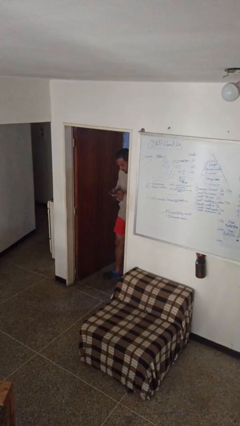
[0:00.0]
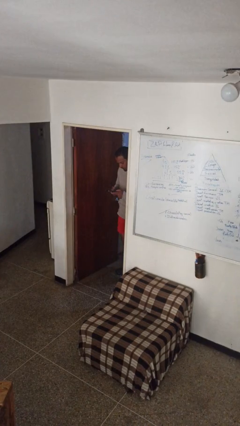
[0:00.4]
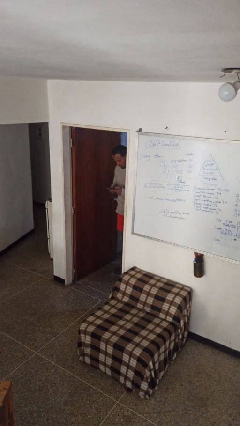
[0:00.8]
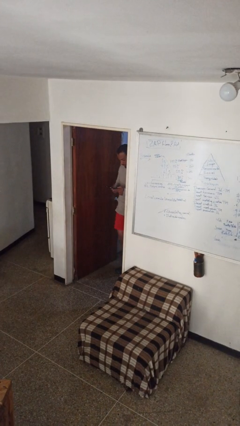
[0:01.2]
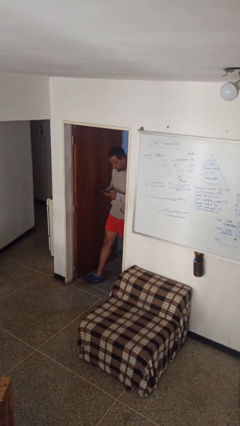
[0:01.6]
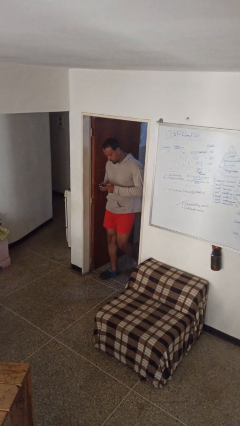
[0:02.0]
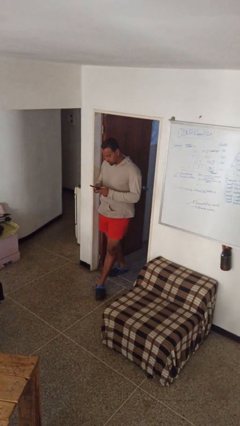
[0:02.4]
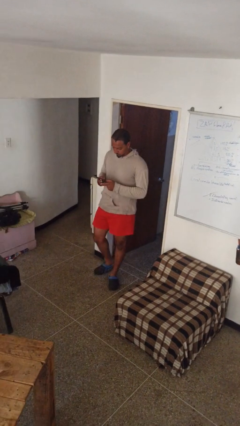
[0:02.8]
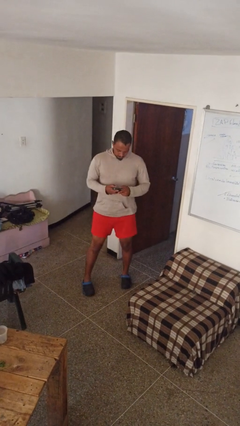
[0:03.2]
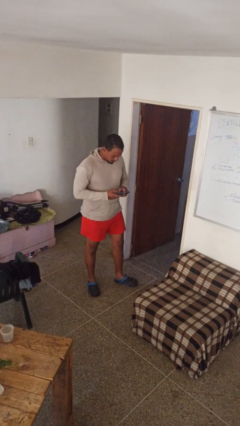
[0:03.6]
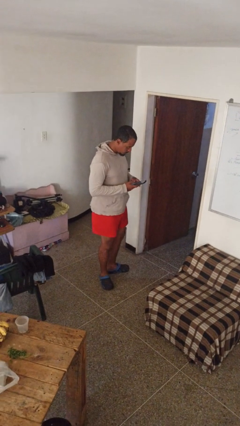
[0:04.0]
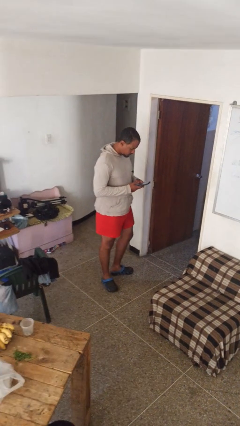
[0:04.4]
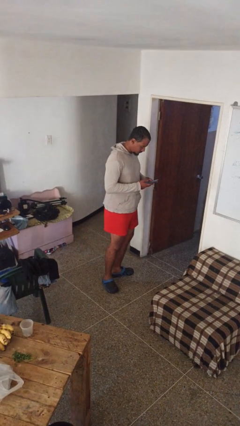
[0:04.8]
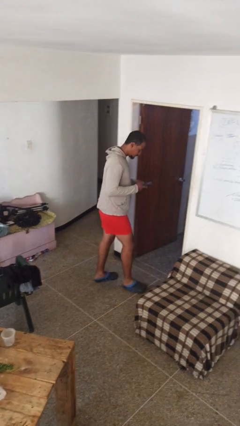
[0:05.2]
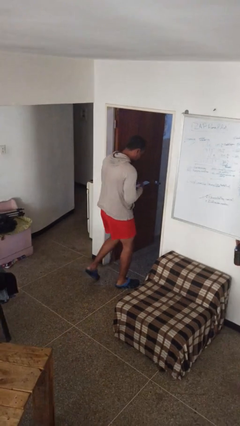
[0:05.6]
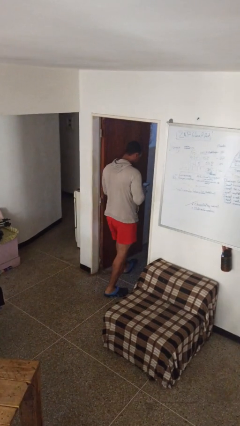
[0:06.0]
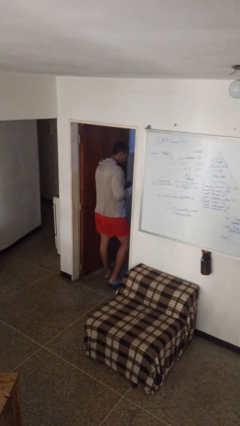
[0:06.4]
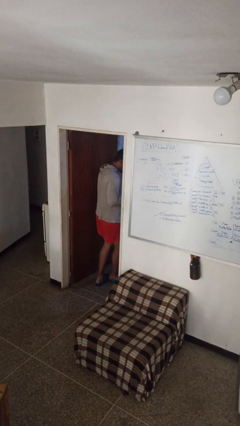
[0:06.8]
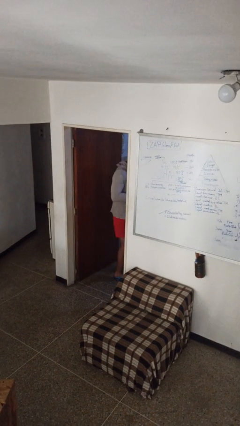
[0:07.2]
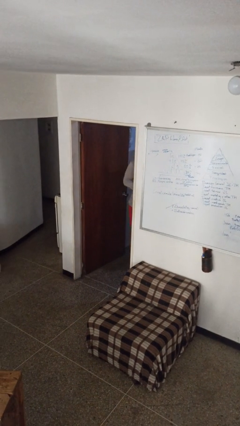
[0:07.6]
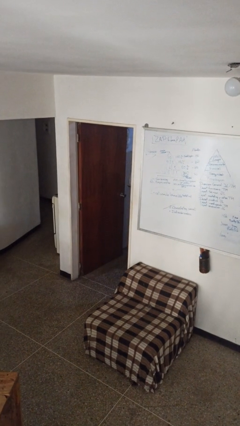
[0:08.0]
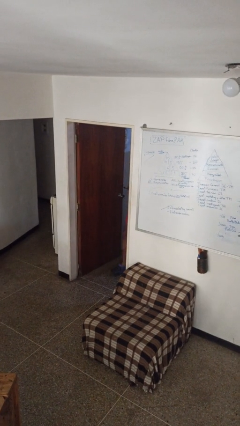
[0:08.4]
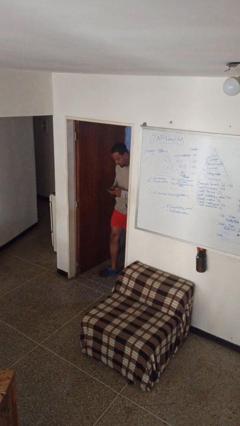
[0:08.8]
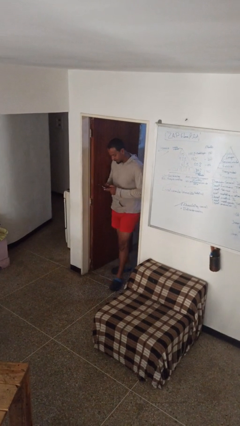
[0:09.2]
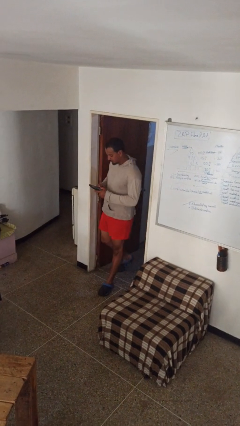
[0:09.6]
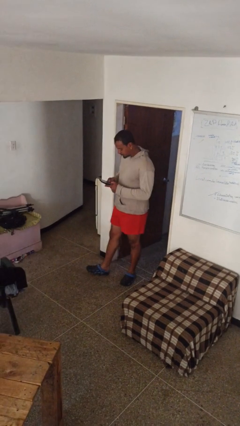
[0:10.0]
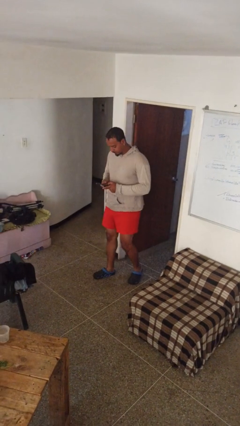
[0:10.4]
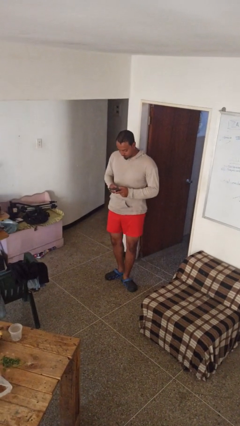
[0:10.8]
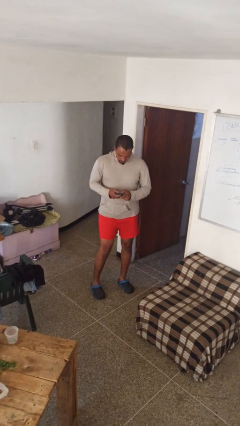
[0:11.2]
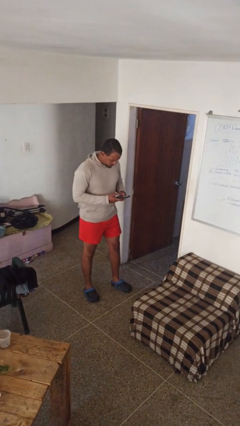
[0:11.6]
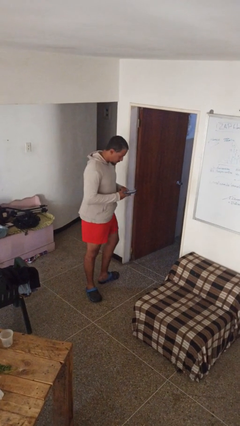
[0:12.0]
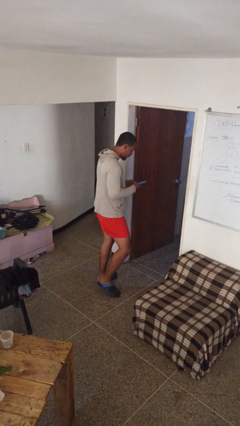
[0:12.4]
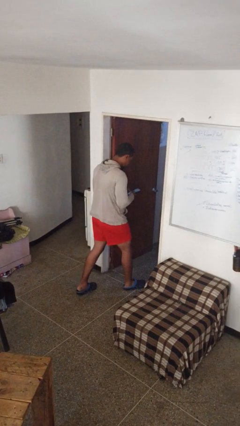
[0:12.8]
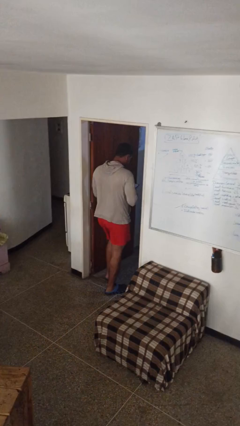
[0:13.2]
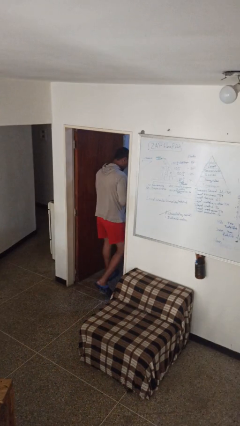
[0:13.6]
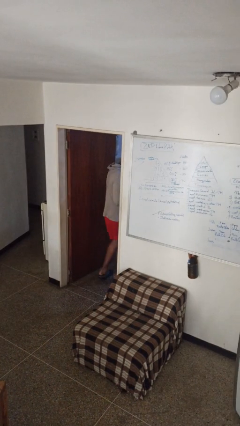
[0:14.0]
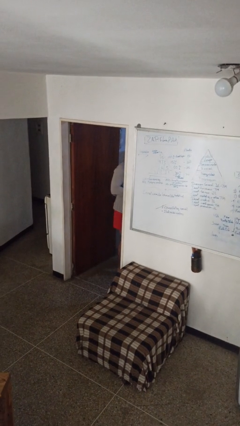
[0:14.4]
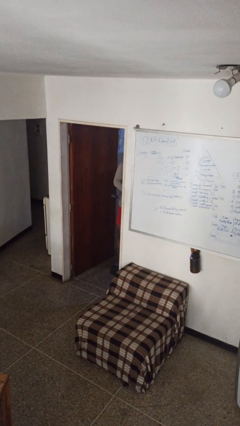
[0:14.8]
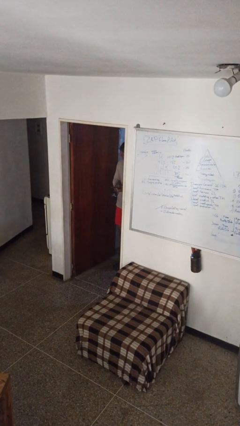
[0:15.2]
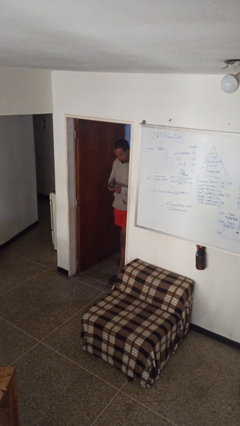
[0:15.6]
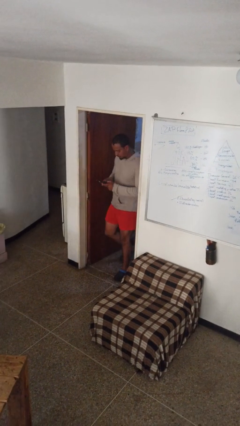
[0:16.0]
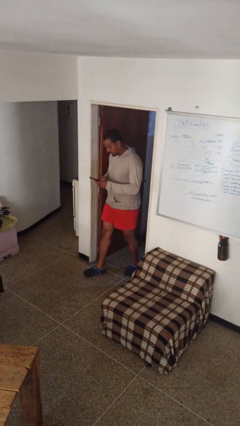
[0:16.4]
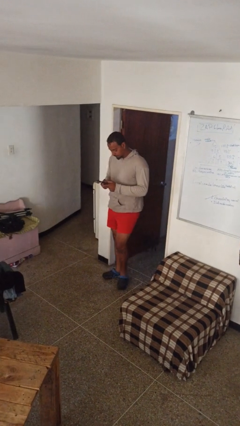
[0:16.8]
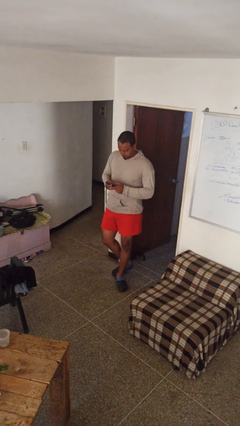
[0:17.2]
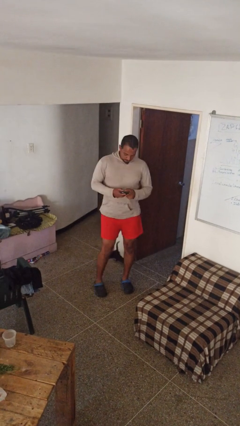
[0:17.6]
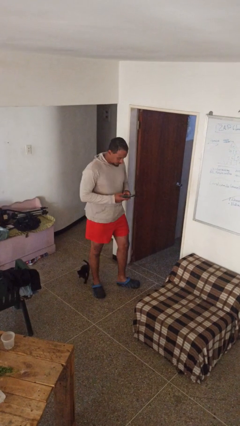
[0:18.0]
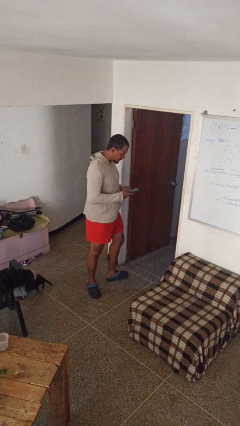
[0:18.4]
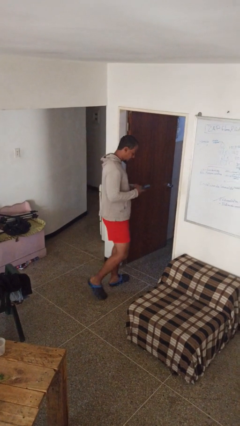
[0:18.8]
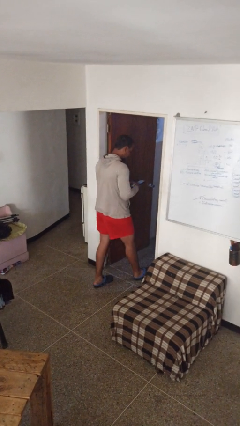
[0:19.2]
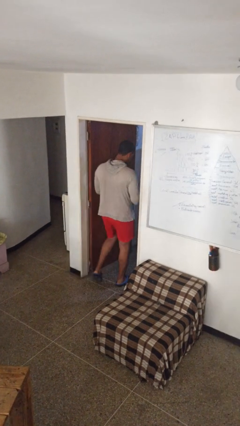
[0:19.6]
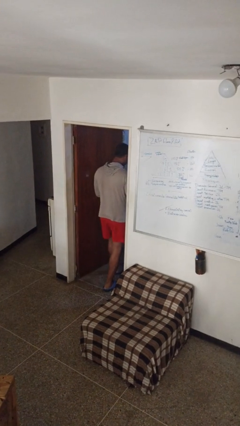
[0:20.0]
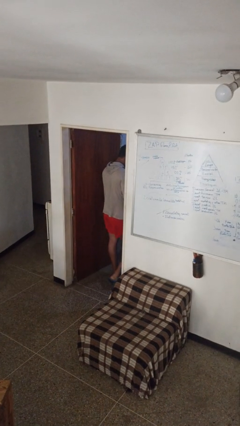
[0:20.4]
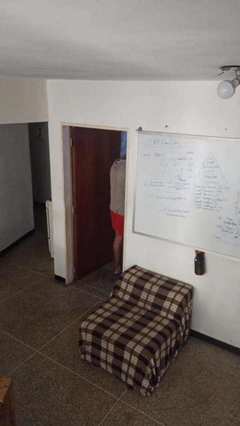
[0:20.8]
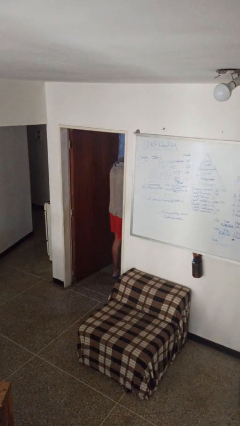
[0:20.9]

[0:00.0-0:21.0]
person texts on phone

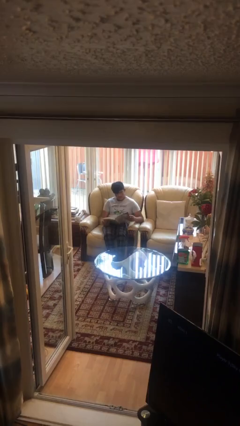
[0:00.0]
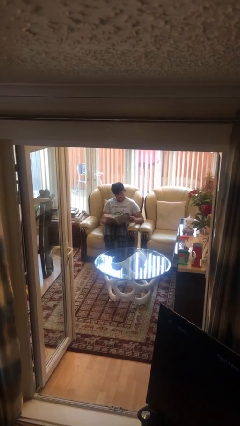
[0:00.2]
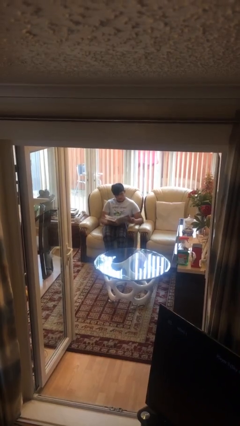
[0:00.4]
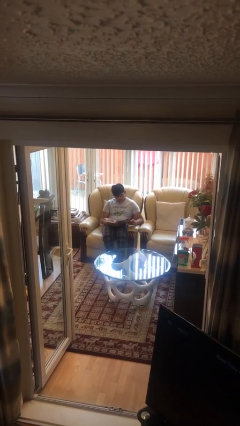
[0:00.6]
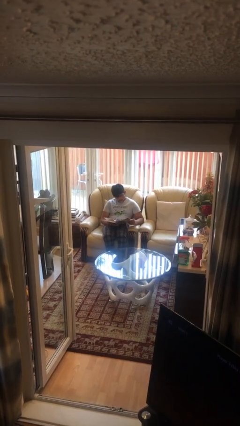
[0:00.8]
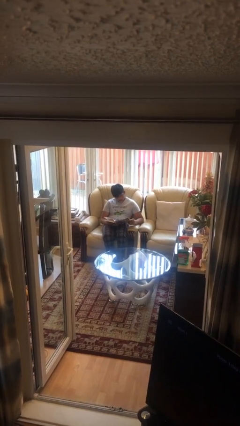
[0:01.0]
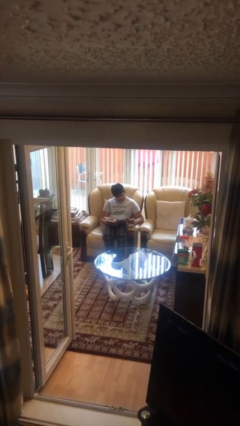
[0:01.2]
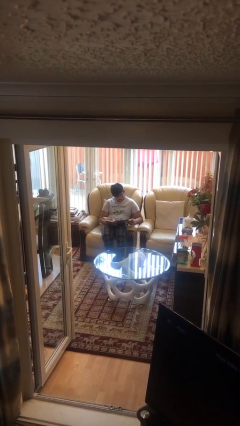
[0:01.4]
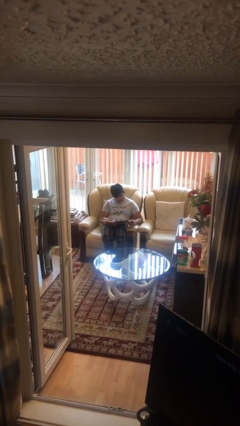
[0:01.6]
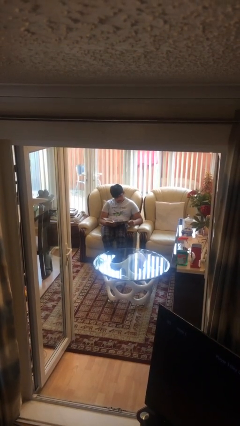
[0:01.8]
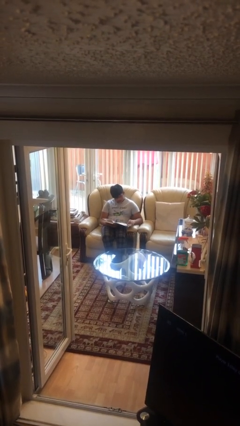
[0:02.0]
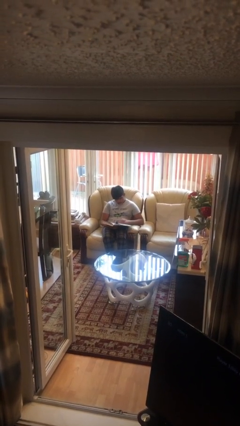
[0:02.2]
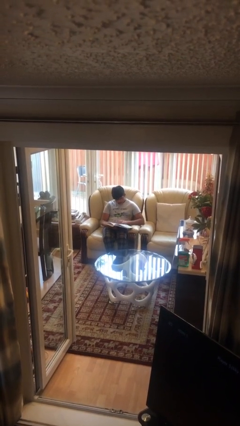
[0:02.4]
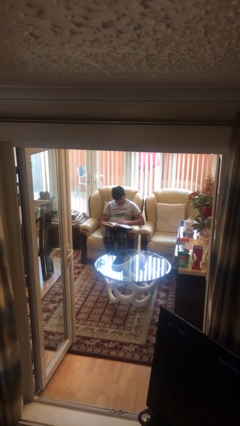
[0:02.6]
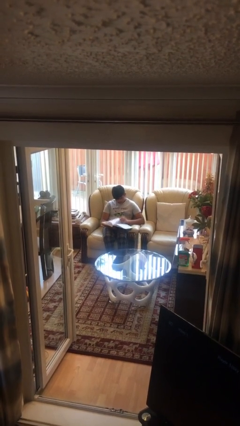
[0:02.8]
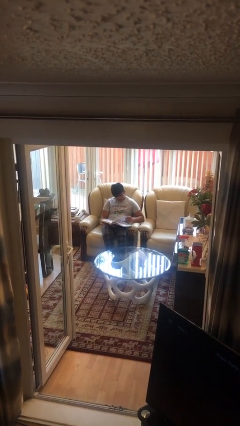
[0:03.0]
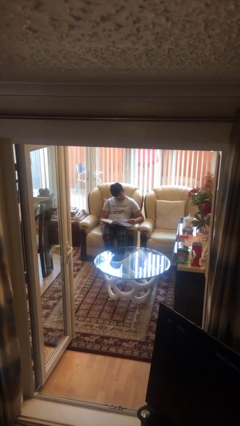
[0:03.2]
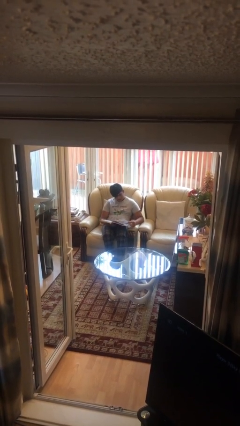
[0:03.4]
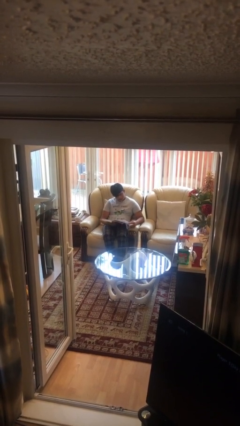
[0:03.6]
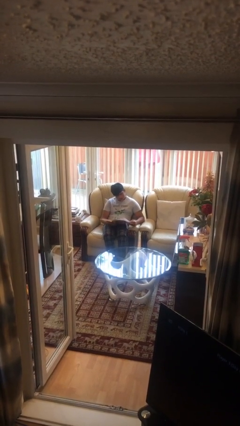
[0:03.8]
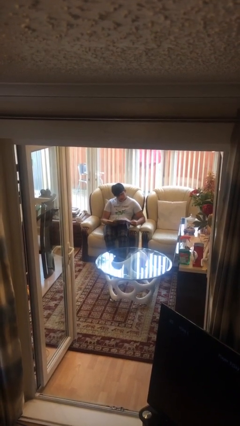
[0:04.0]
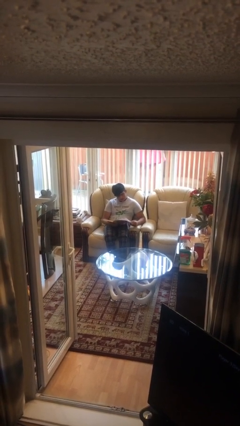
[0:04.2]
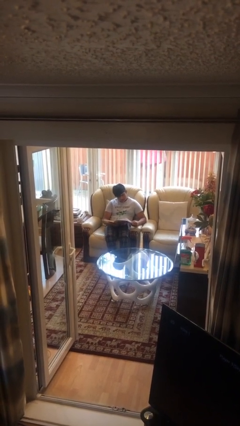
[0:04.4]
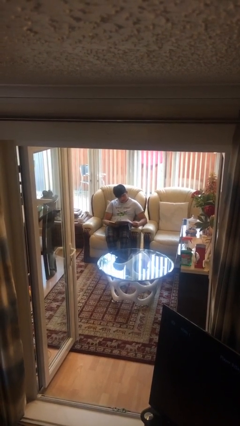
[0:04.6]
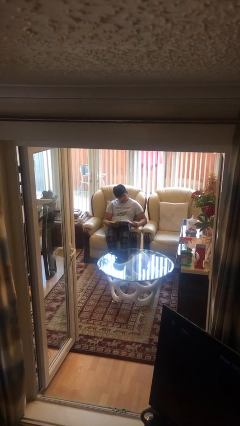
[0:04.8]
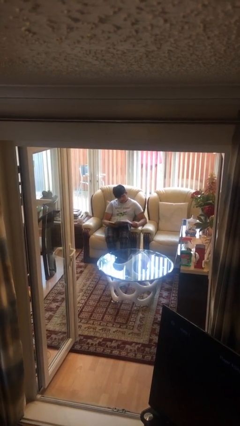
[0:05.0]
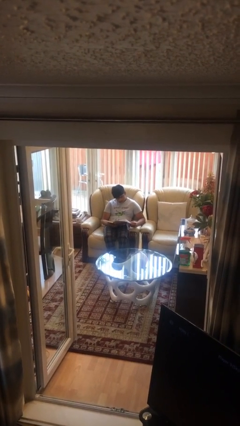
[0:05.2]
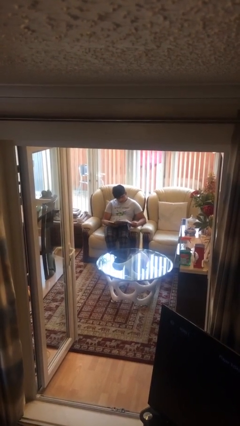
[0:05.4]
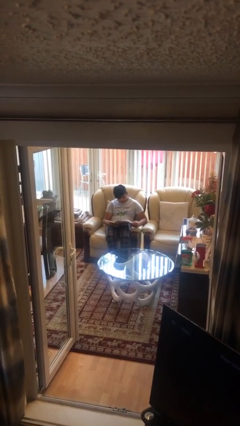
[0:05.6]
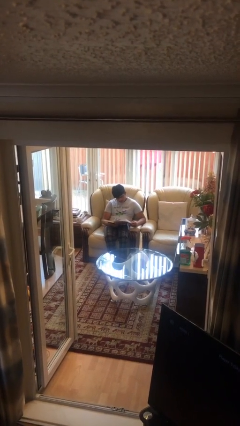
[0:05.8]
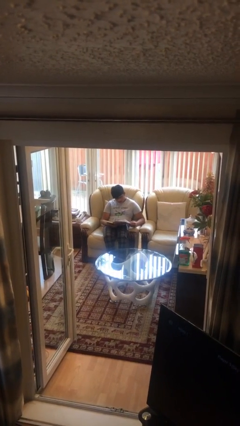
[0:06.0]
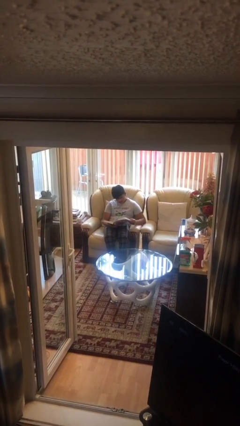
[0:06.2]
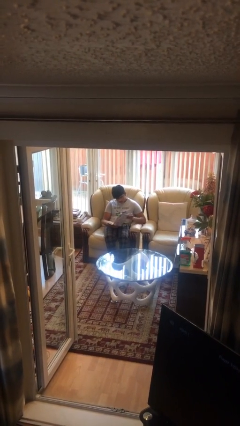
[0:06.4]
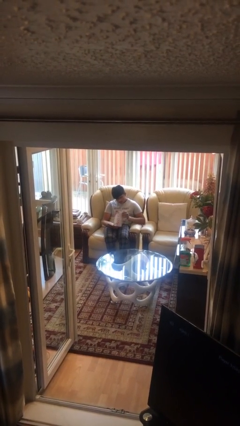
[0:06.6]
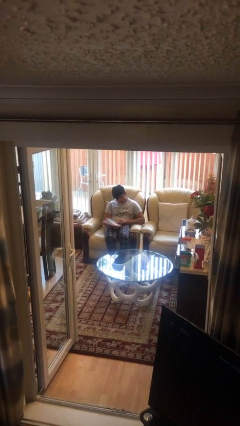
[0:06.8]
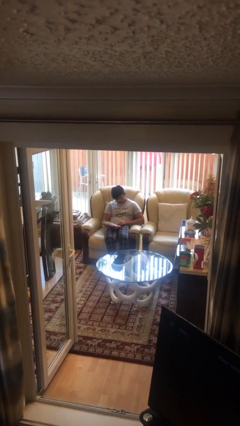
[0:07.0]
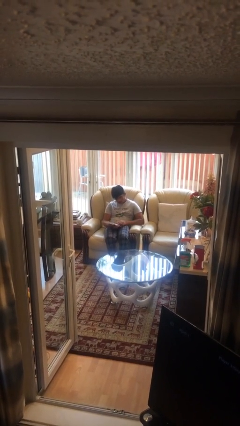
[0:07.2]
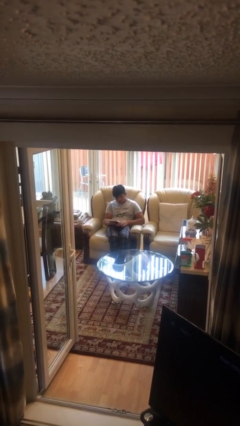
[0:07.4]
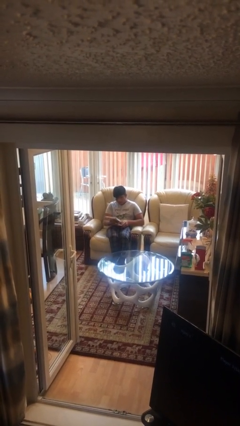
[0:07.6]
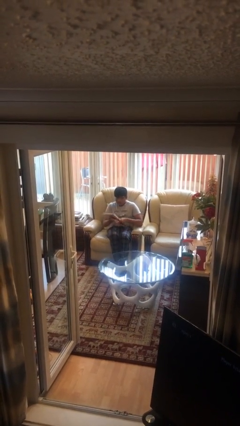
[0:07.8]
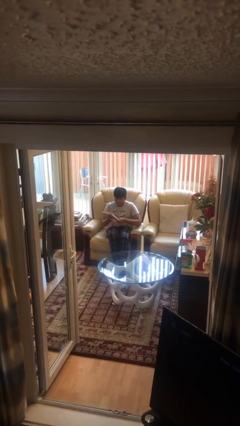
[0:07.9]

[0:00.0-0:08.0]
person reads document
